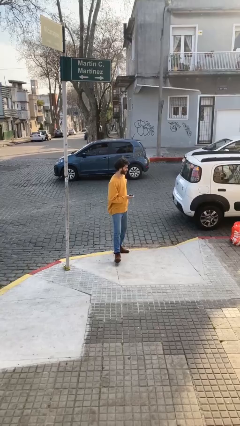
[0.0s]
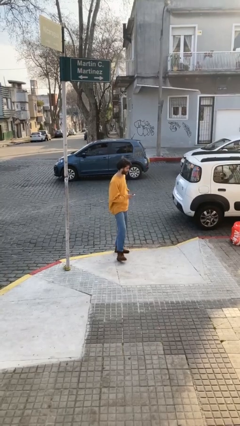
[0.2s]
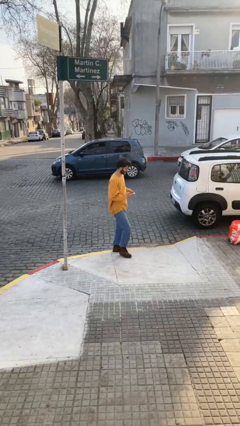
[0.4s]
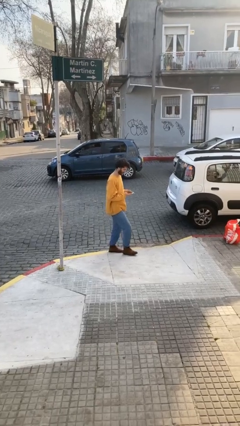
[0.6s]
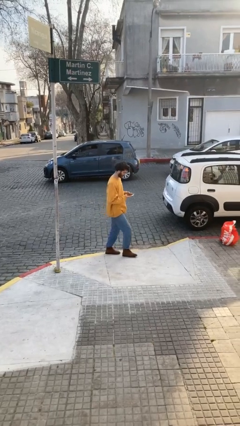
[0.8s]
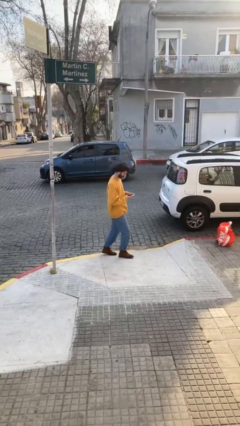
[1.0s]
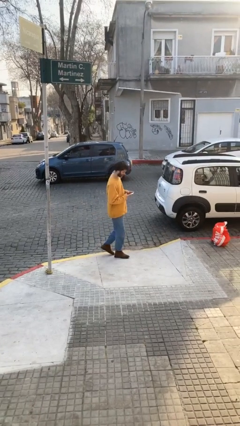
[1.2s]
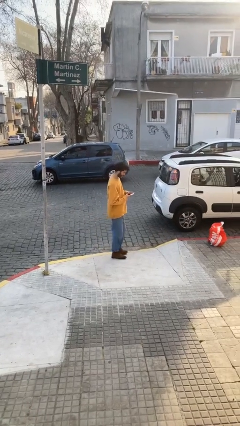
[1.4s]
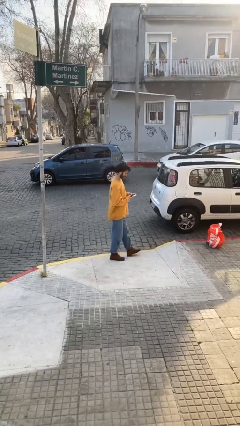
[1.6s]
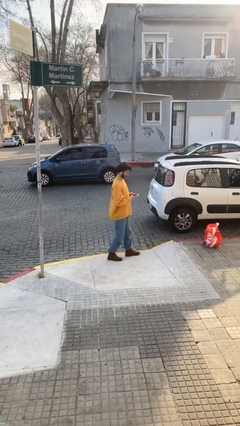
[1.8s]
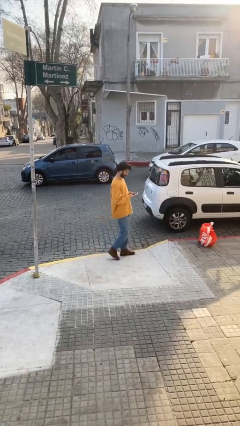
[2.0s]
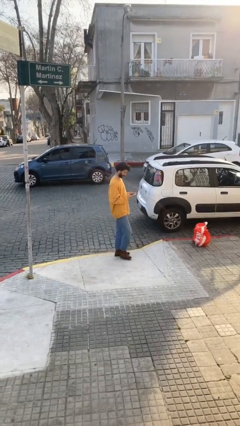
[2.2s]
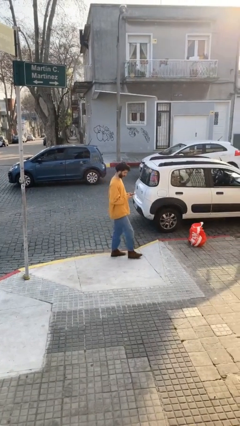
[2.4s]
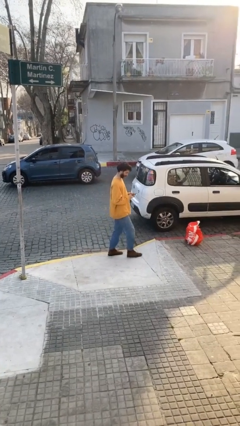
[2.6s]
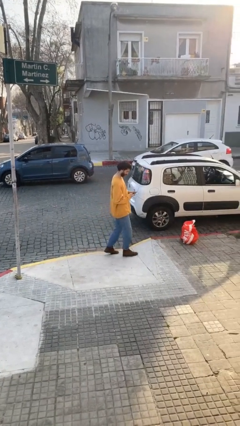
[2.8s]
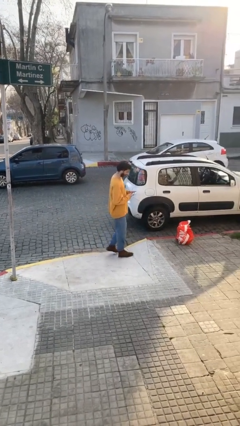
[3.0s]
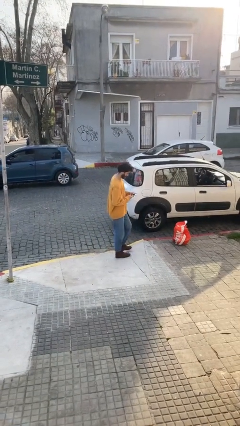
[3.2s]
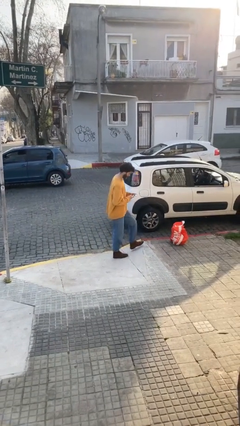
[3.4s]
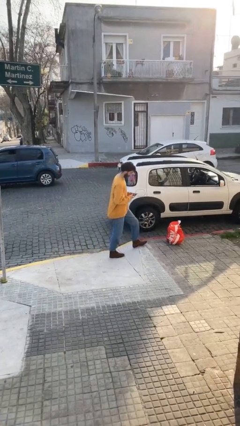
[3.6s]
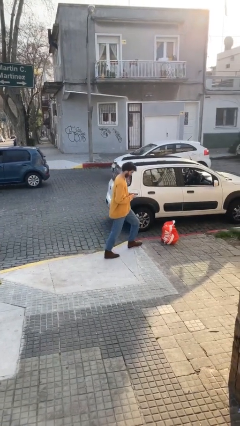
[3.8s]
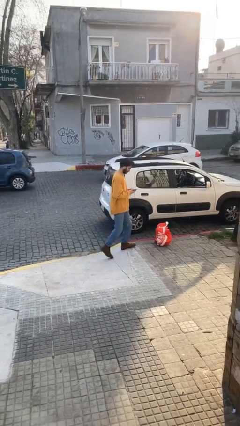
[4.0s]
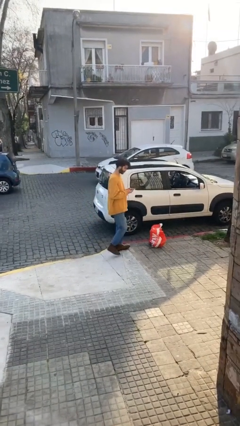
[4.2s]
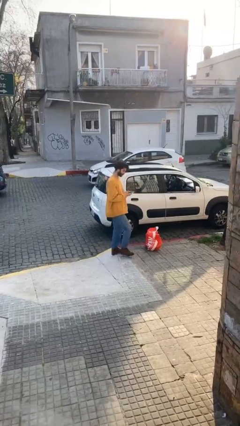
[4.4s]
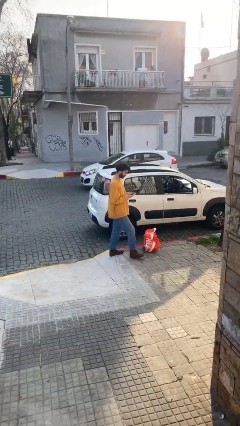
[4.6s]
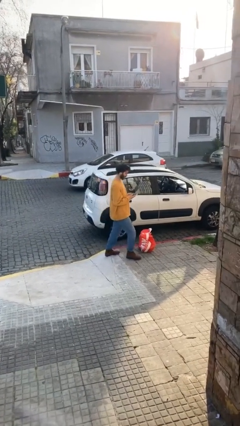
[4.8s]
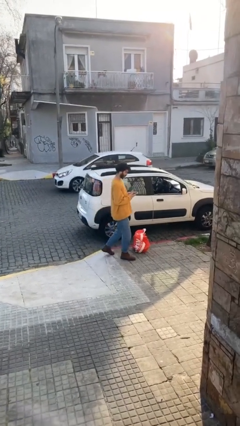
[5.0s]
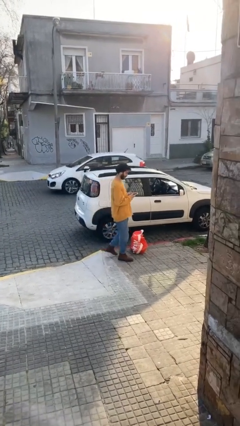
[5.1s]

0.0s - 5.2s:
person texts on phone

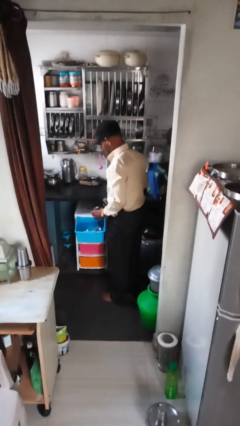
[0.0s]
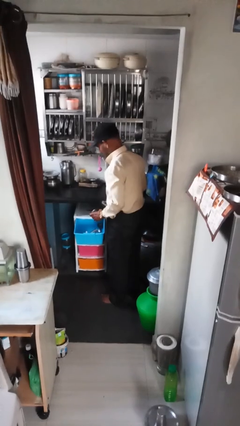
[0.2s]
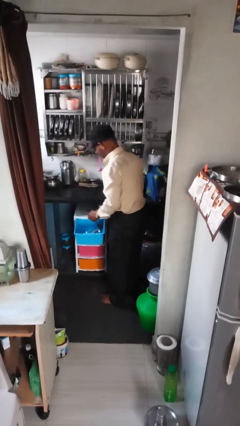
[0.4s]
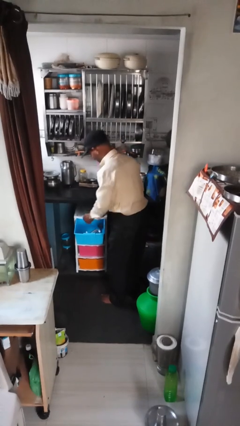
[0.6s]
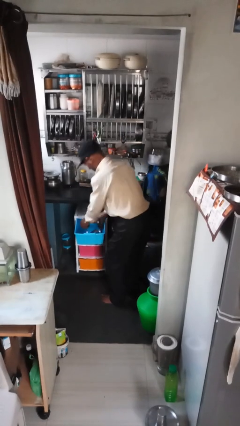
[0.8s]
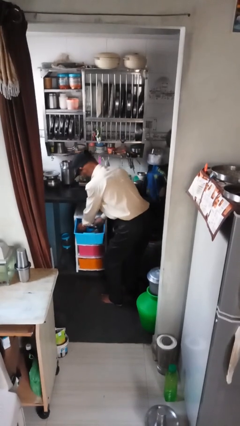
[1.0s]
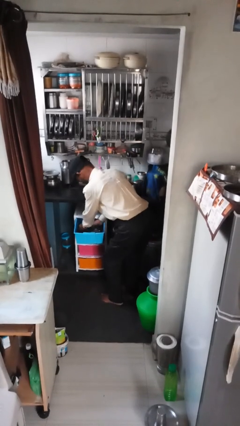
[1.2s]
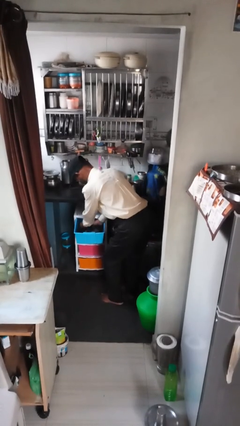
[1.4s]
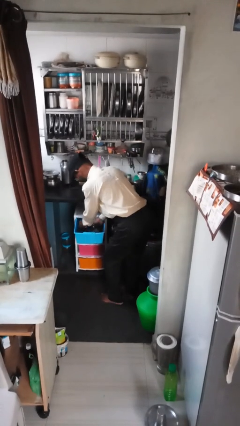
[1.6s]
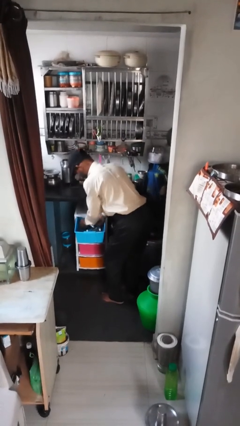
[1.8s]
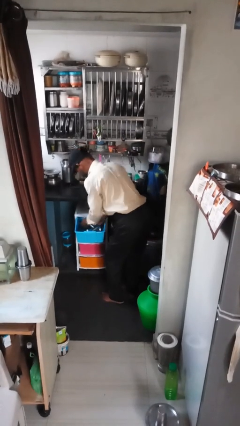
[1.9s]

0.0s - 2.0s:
person puts object into kitchen drawer

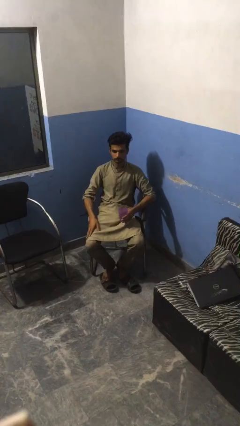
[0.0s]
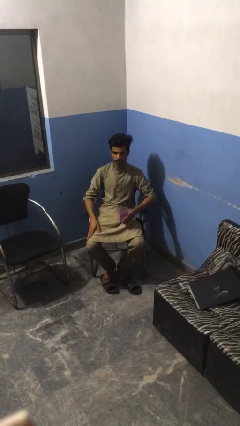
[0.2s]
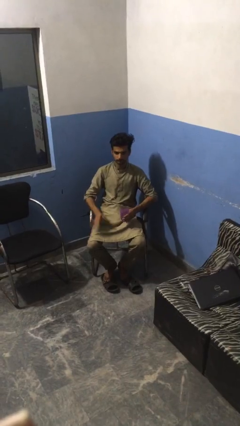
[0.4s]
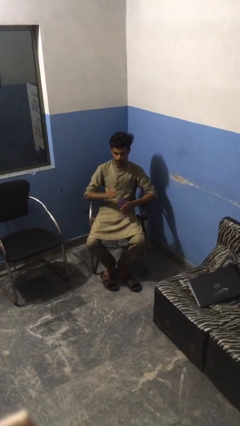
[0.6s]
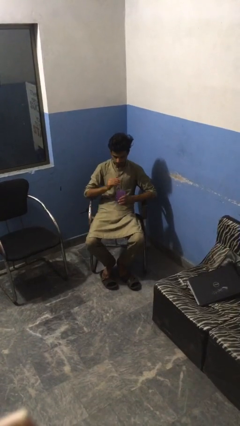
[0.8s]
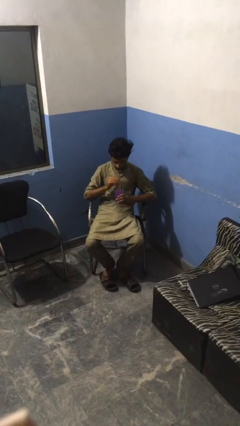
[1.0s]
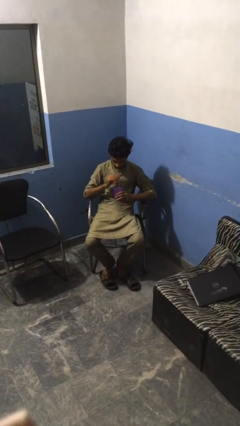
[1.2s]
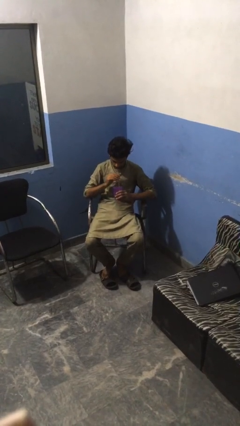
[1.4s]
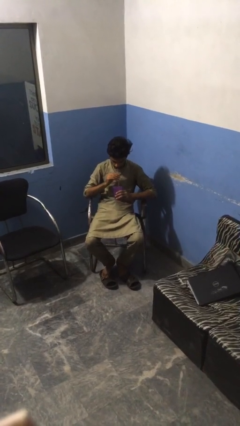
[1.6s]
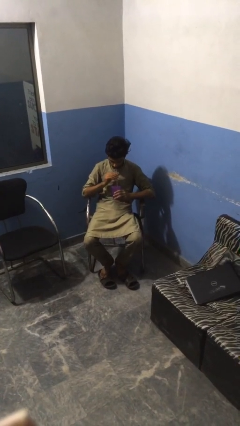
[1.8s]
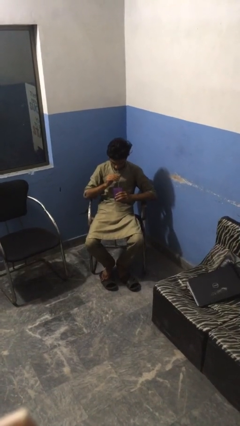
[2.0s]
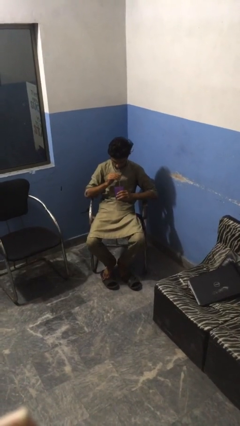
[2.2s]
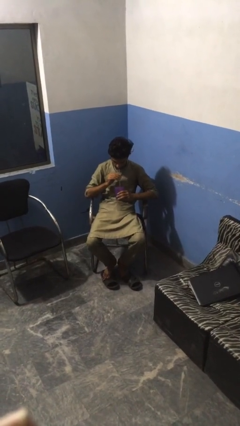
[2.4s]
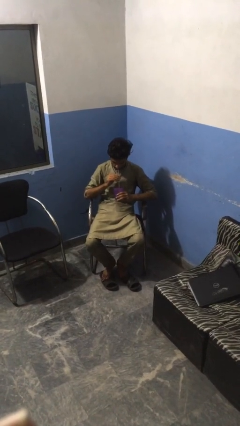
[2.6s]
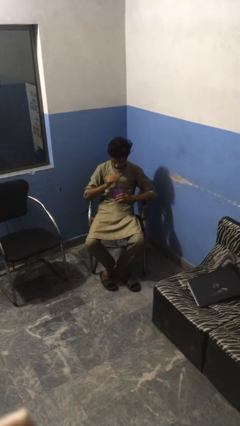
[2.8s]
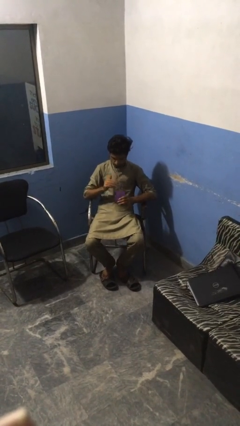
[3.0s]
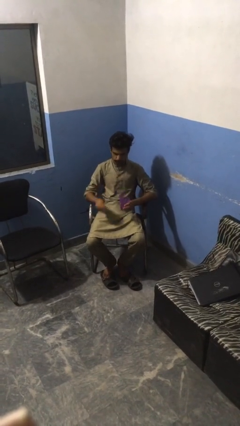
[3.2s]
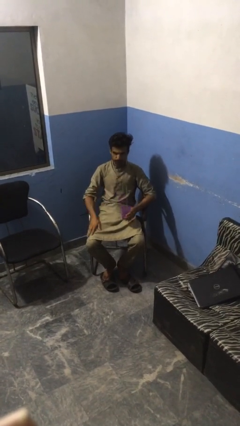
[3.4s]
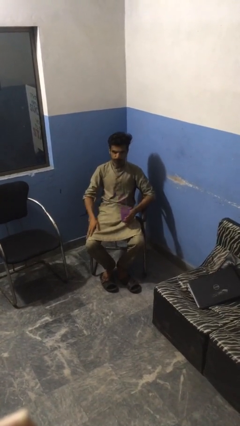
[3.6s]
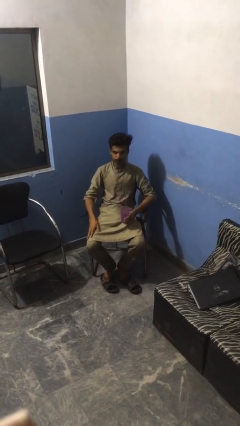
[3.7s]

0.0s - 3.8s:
person drinks from straw

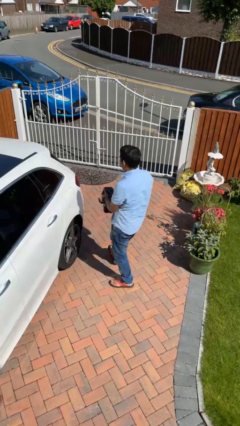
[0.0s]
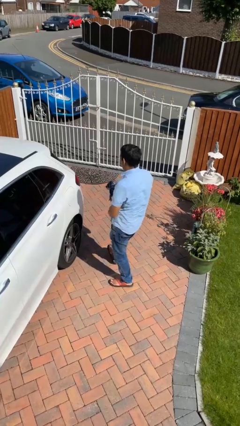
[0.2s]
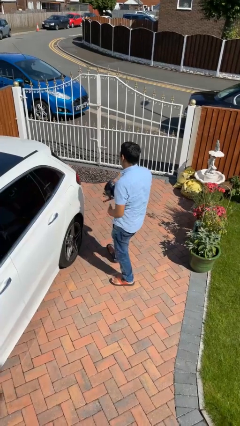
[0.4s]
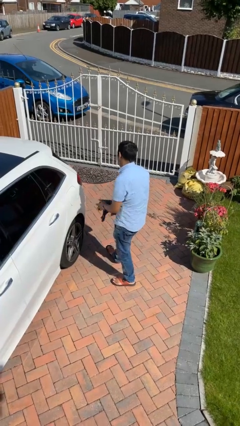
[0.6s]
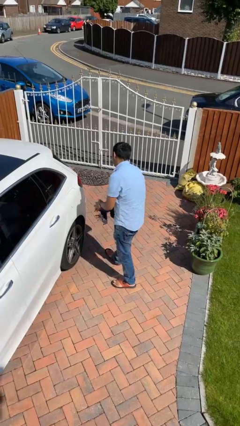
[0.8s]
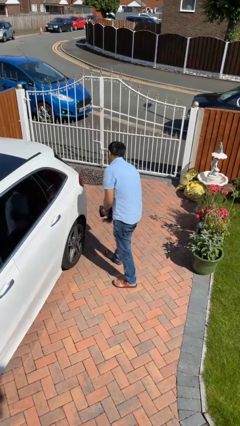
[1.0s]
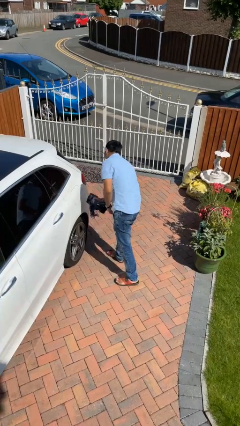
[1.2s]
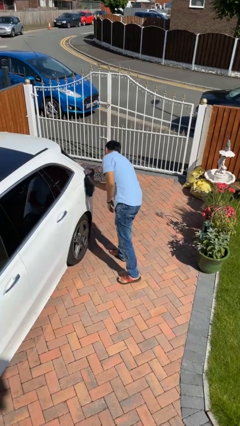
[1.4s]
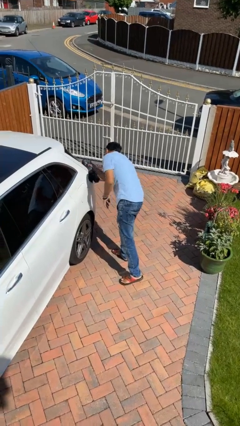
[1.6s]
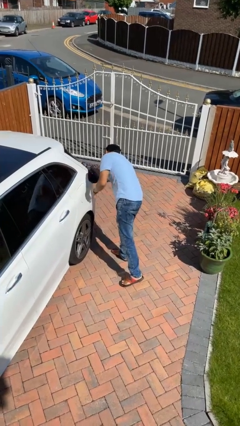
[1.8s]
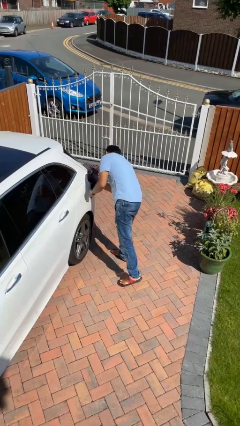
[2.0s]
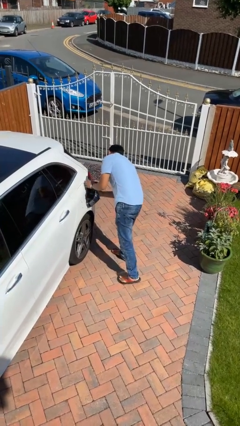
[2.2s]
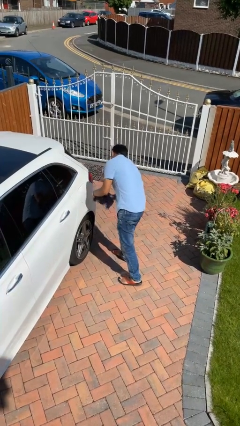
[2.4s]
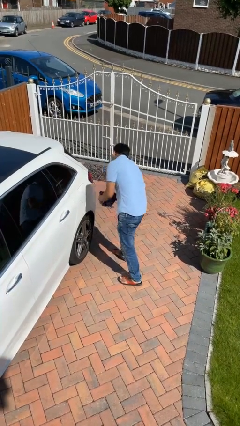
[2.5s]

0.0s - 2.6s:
person polishes car with rag

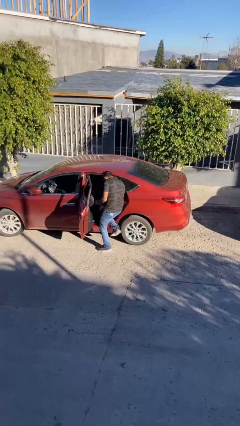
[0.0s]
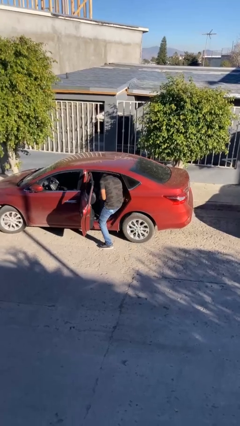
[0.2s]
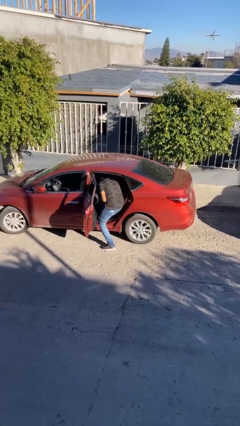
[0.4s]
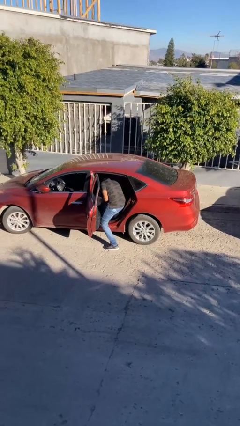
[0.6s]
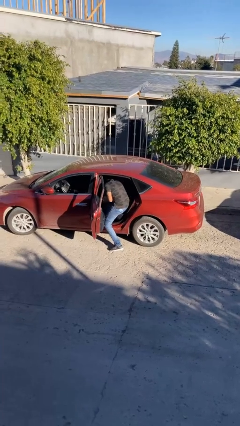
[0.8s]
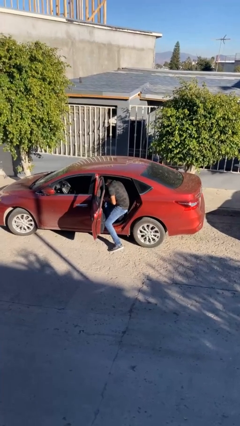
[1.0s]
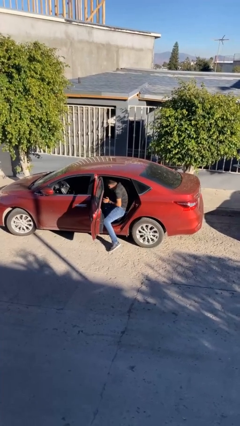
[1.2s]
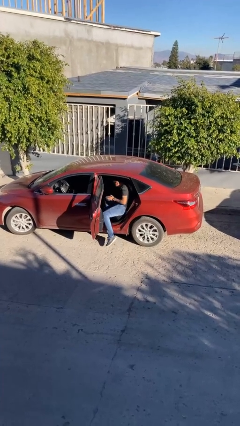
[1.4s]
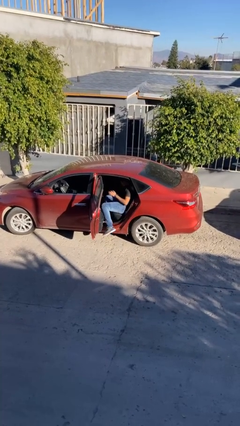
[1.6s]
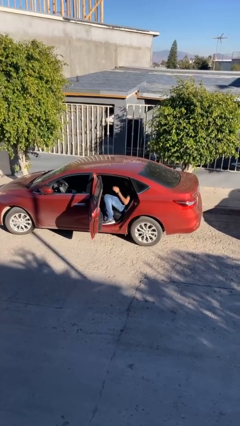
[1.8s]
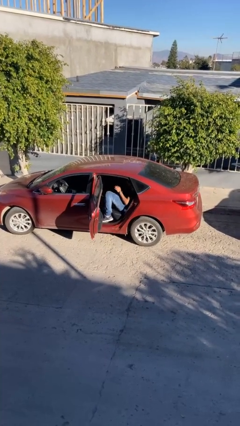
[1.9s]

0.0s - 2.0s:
person enters car

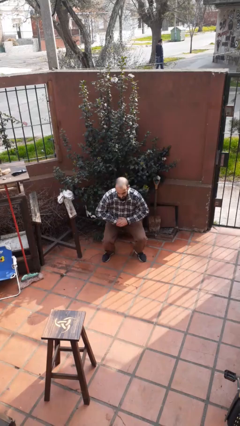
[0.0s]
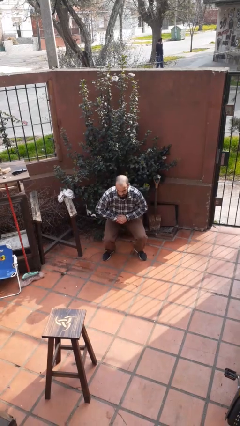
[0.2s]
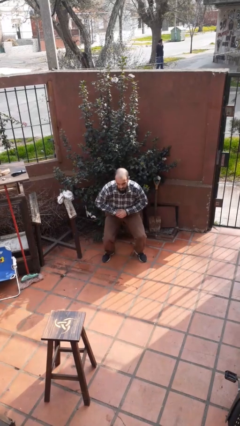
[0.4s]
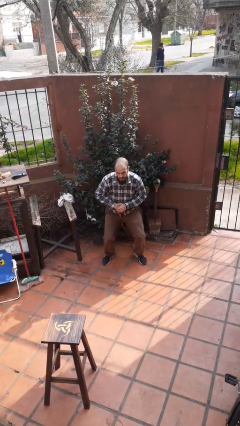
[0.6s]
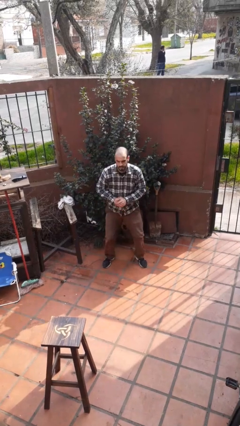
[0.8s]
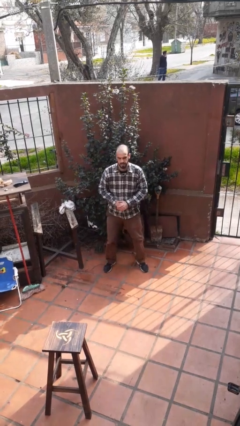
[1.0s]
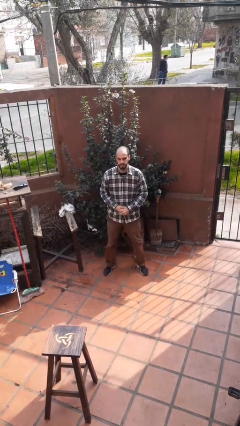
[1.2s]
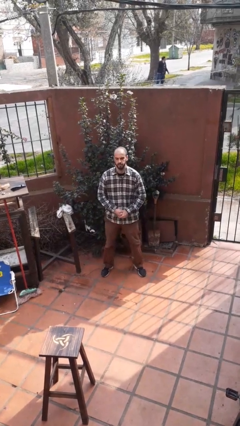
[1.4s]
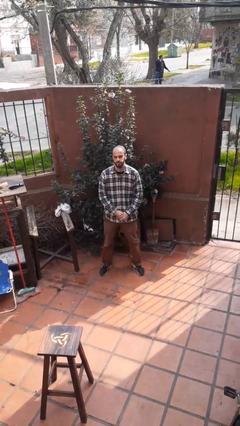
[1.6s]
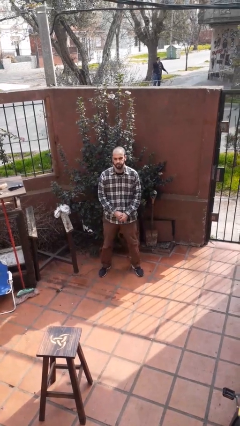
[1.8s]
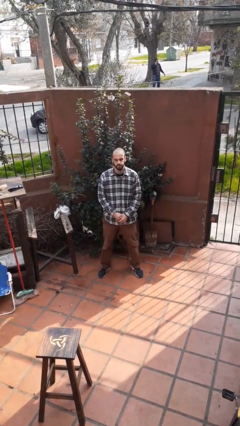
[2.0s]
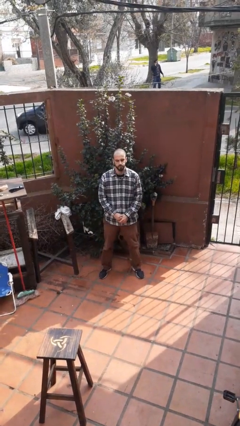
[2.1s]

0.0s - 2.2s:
person stands up
